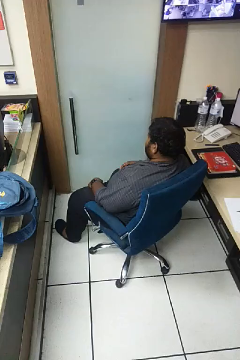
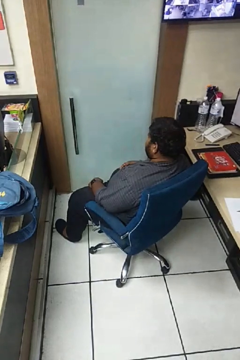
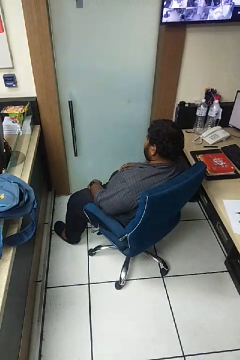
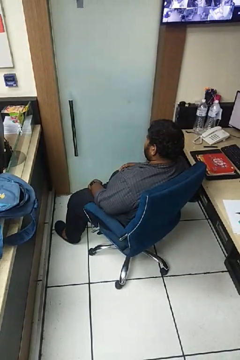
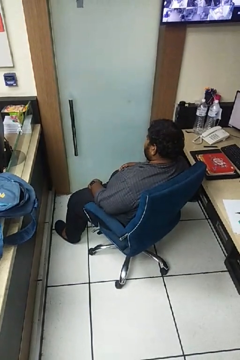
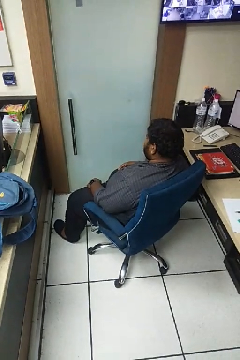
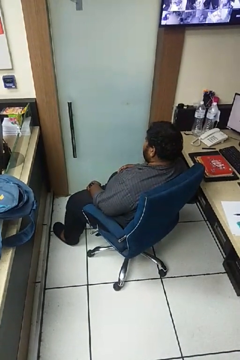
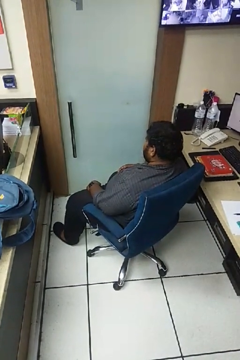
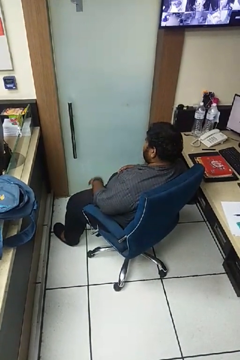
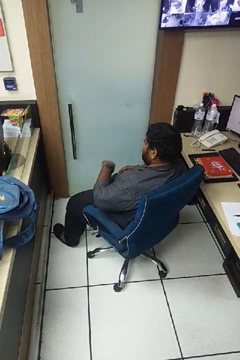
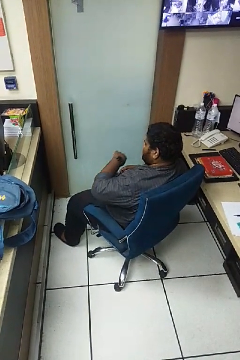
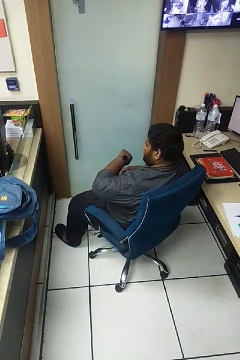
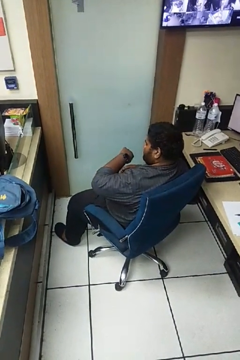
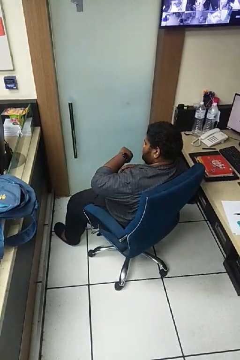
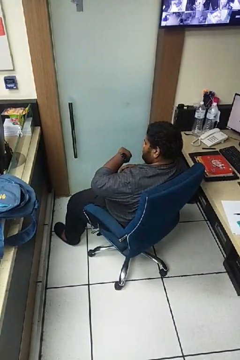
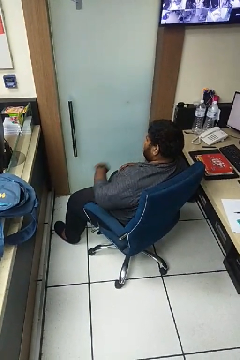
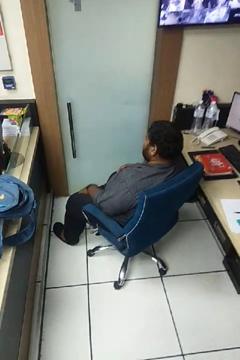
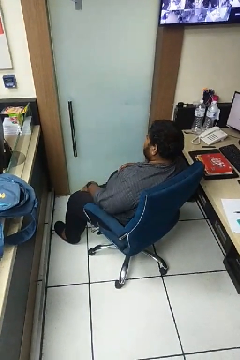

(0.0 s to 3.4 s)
person looks at wristwatch

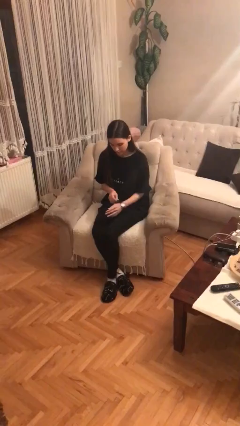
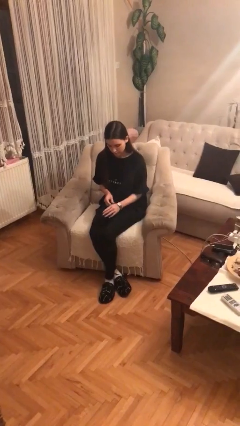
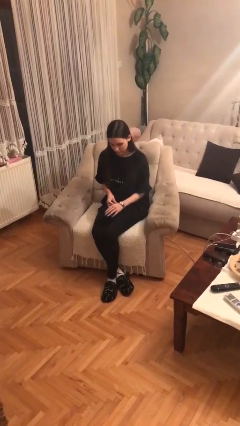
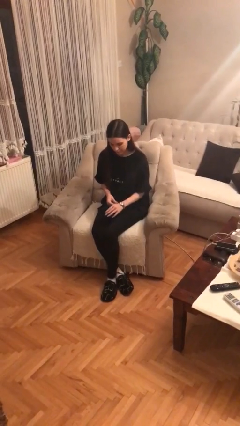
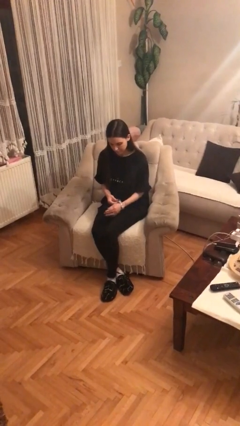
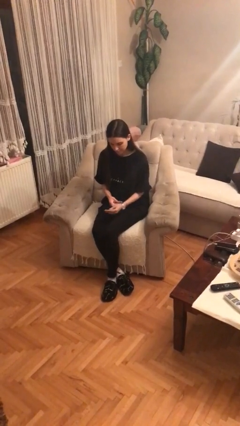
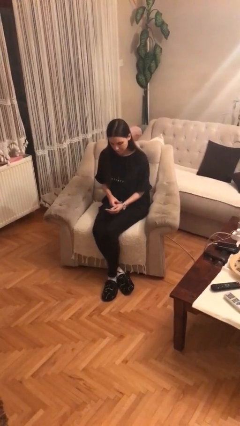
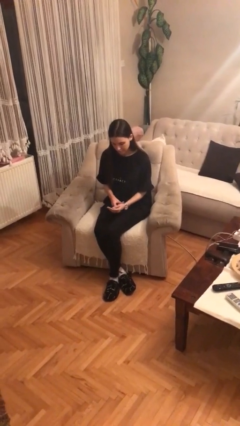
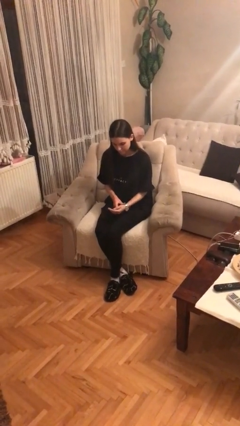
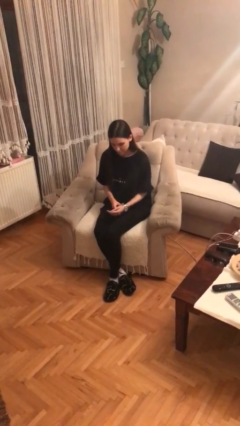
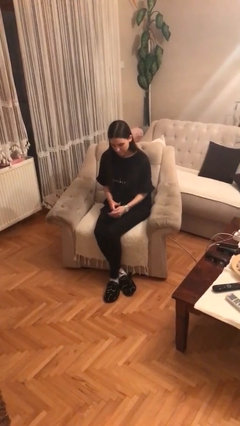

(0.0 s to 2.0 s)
person puts on wristwatch

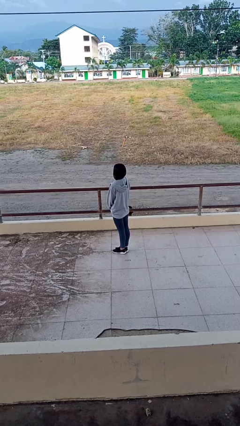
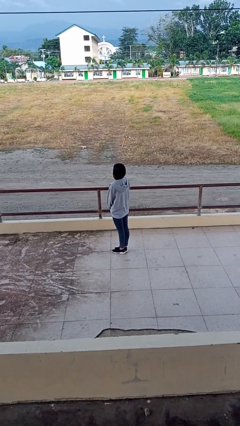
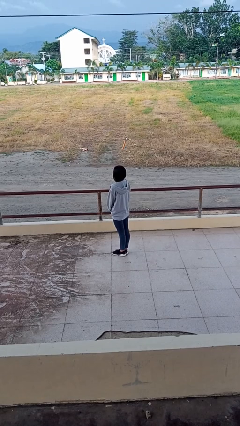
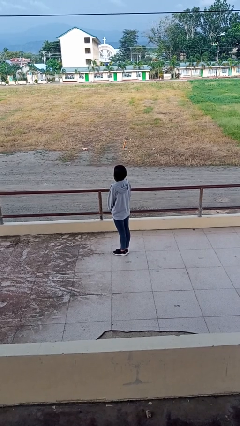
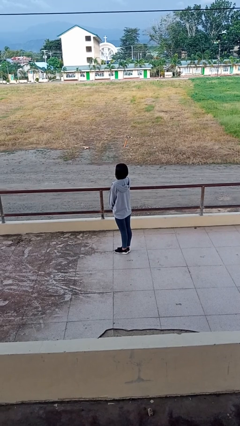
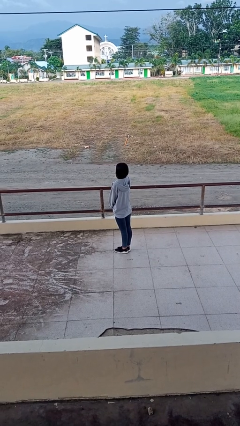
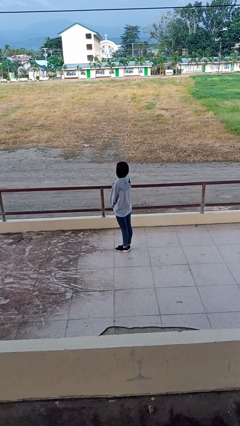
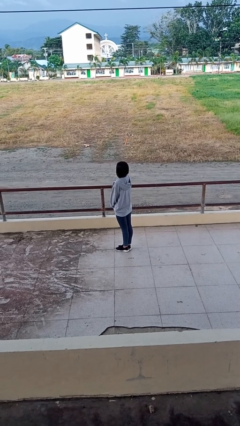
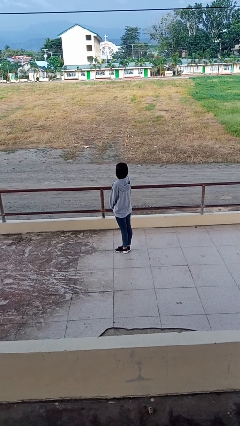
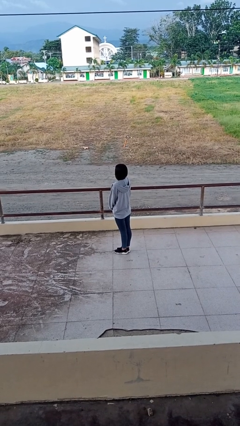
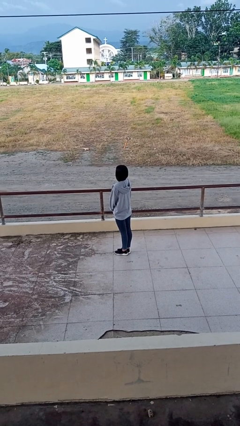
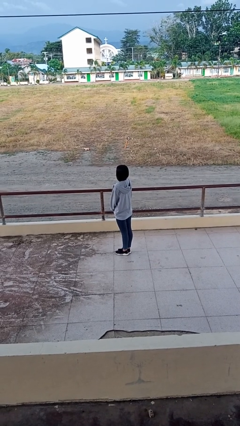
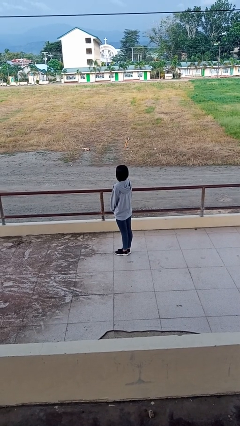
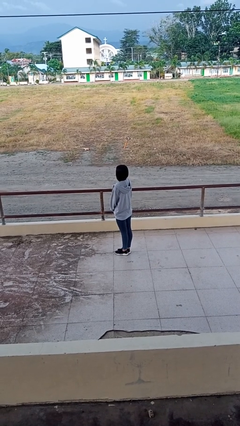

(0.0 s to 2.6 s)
person unzips jacket

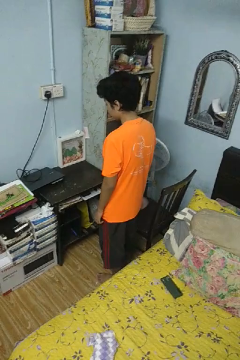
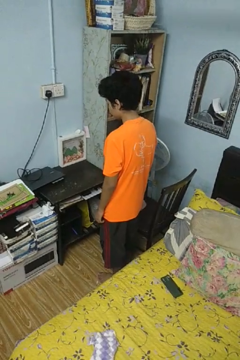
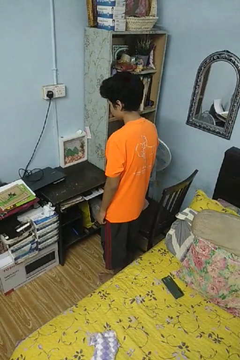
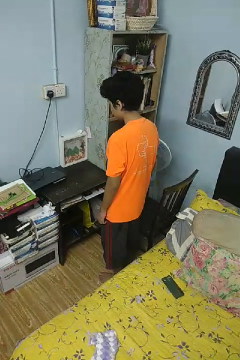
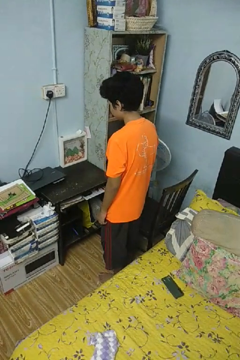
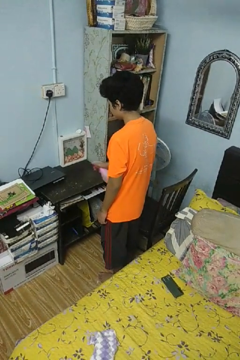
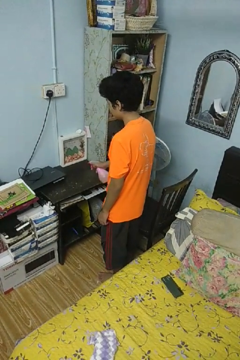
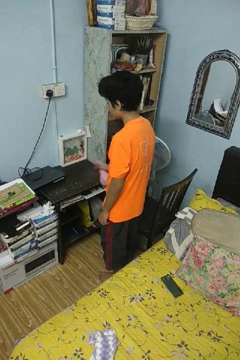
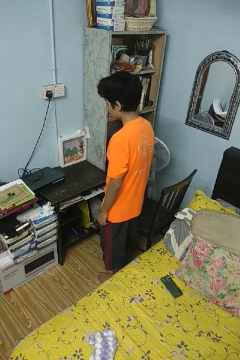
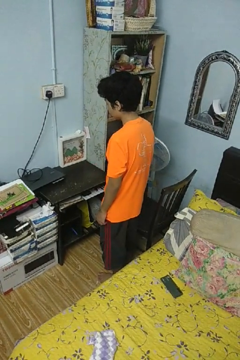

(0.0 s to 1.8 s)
person sprays from bottle

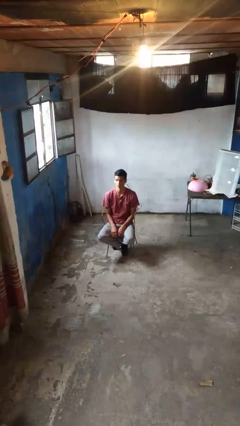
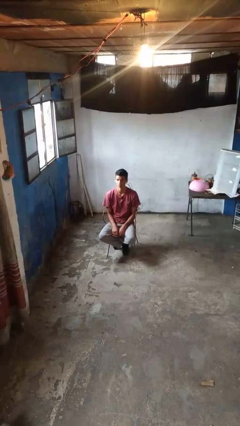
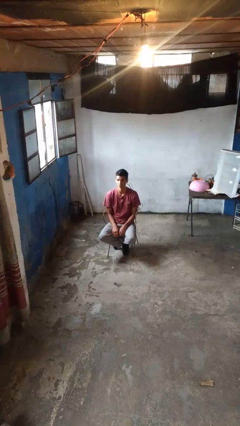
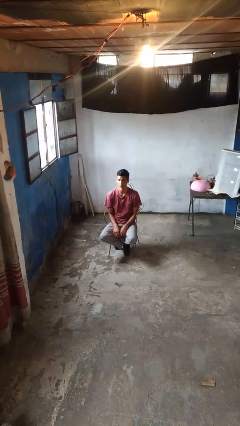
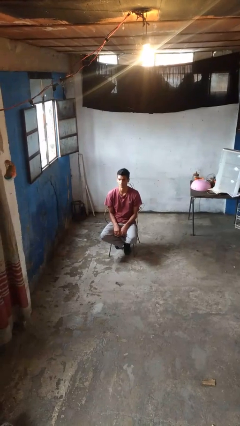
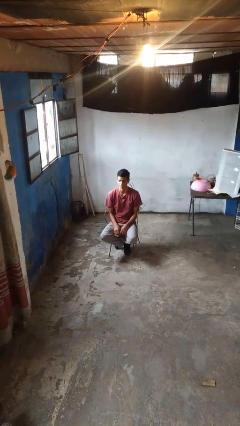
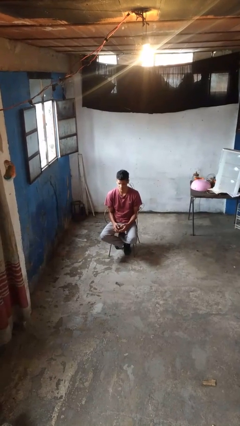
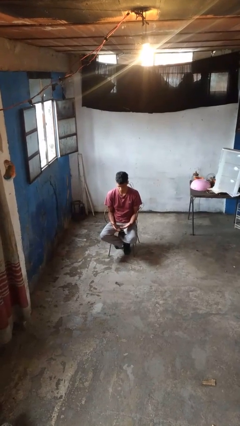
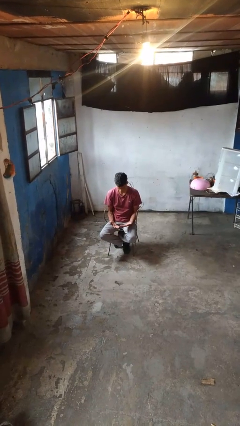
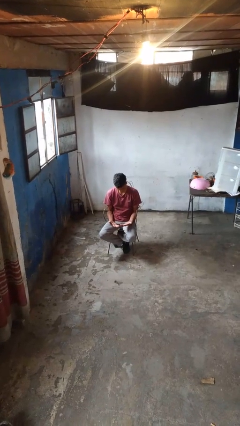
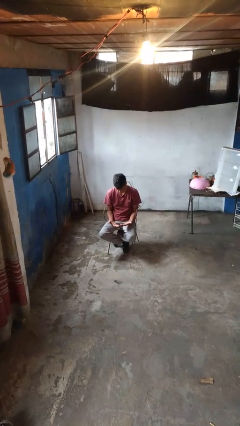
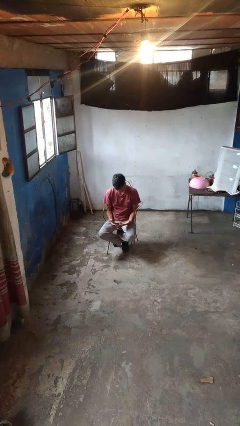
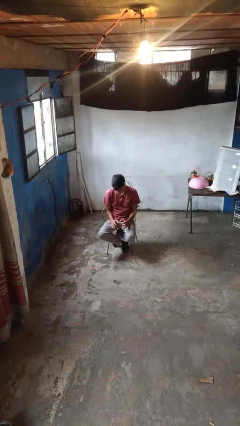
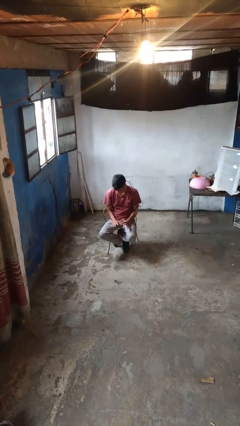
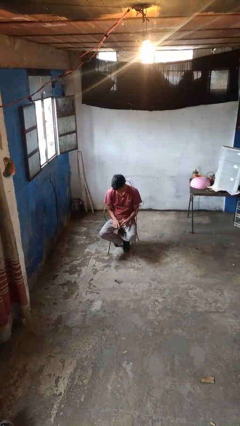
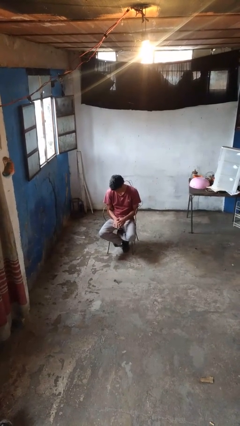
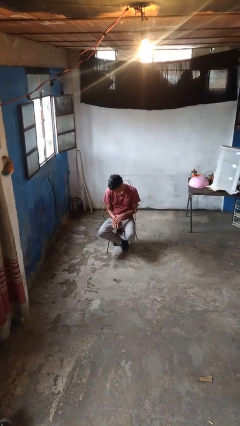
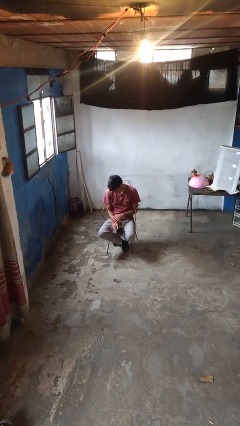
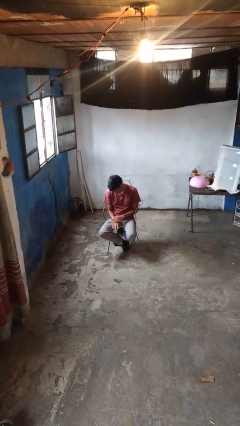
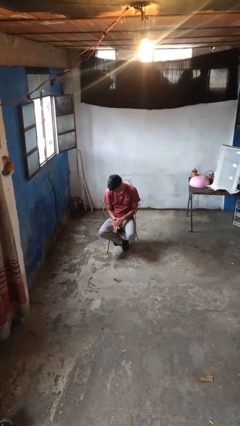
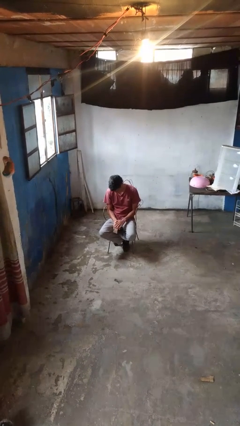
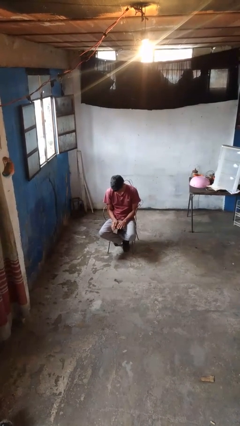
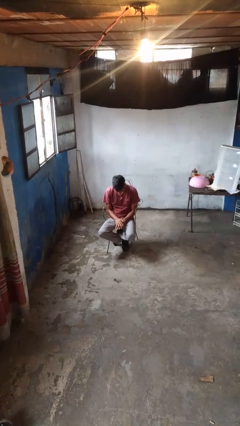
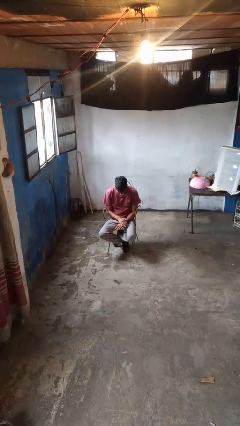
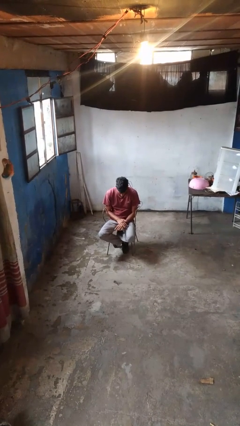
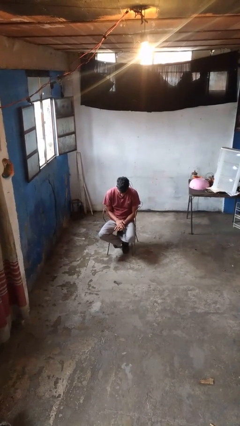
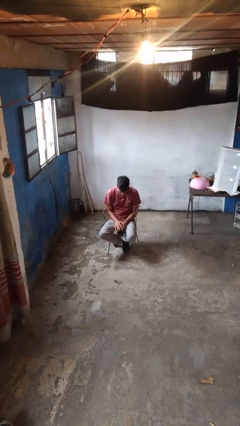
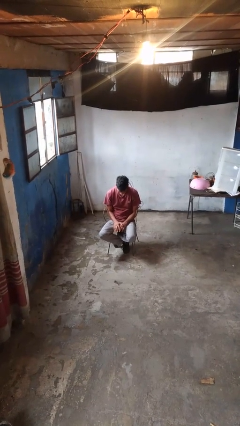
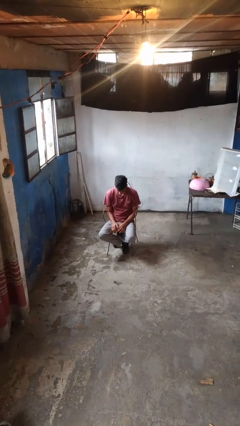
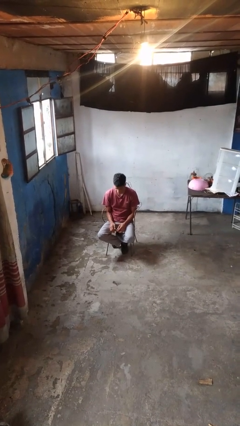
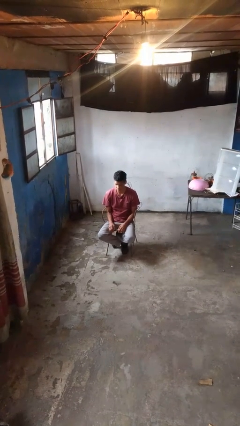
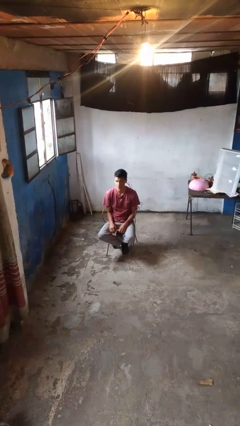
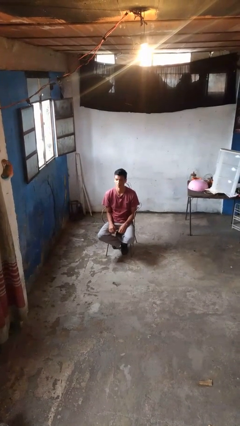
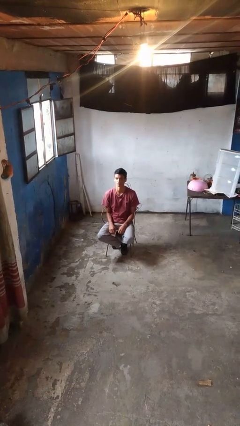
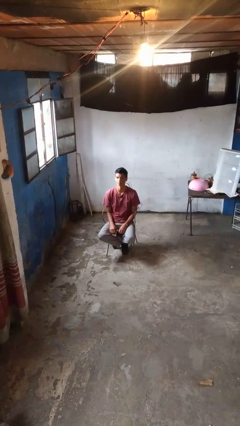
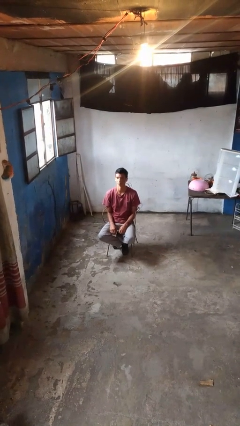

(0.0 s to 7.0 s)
person looks at hands in lap

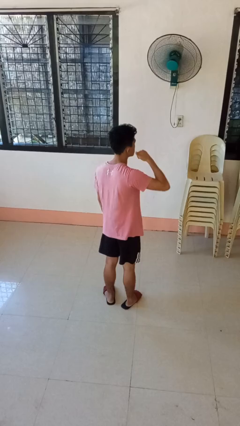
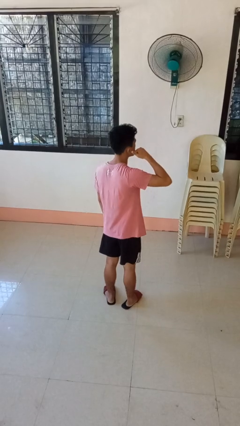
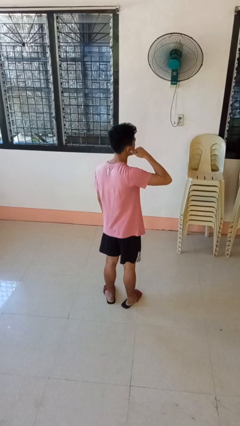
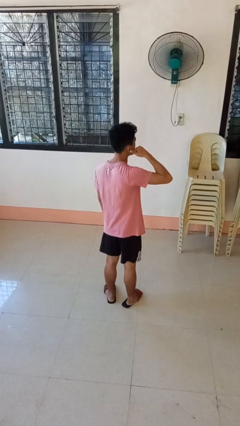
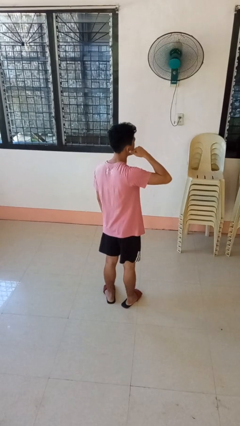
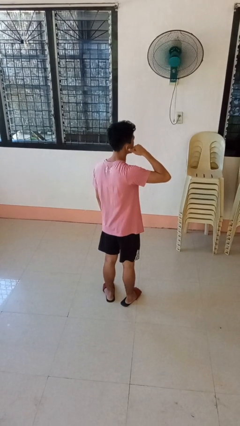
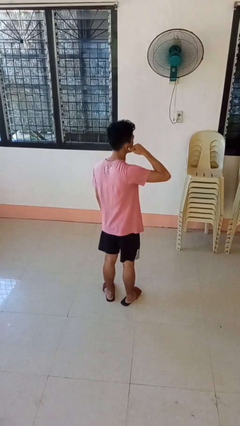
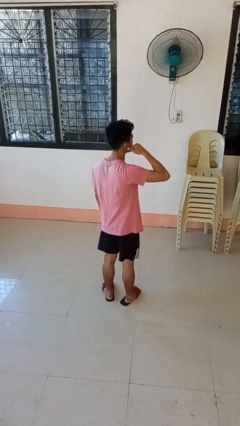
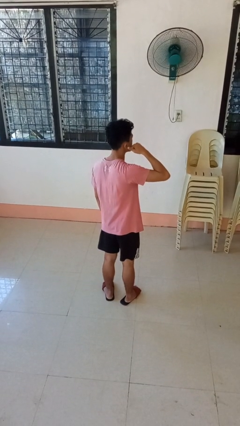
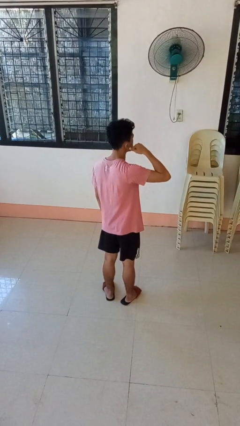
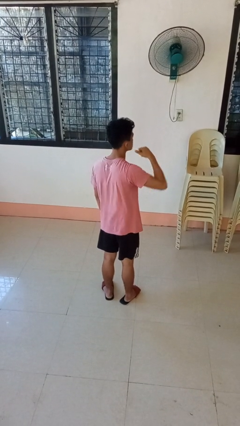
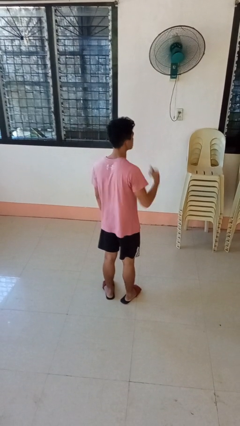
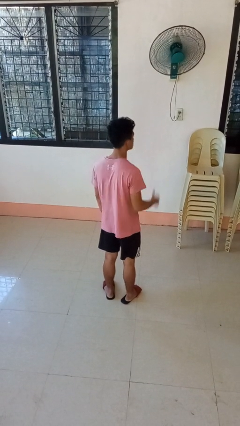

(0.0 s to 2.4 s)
person gestures call me
